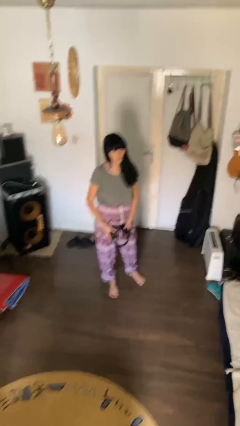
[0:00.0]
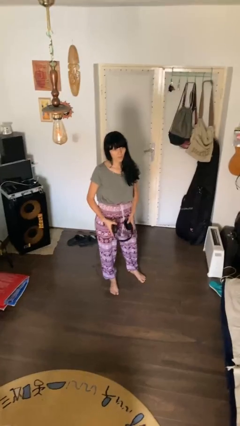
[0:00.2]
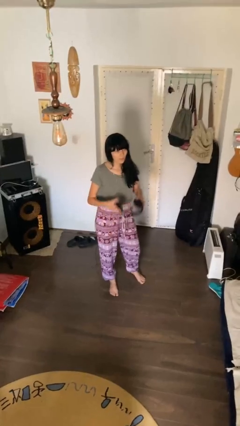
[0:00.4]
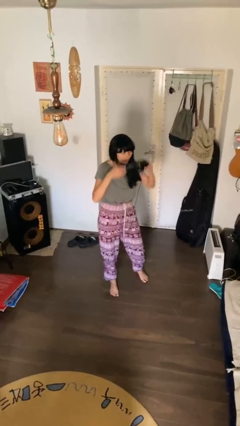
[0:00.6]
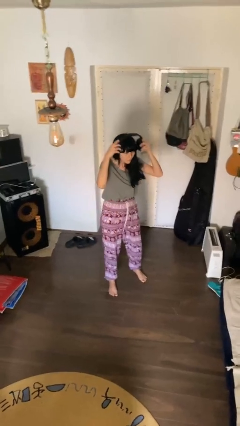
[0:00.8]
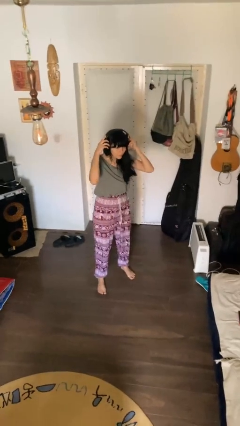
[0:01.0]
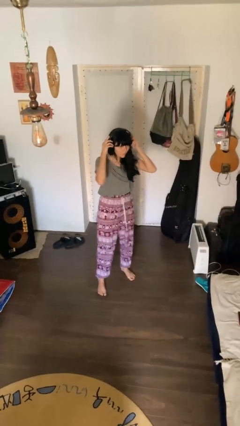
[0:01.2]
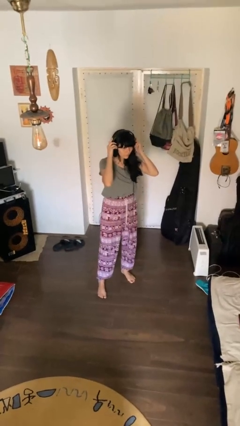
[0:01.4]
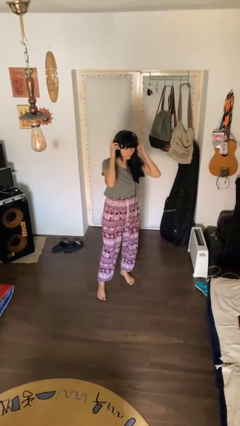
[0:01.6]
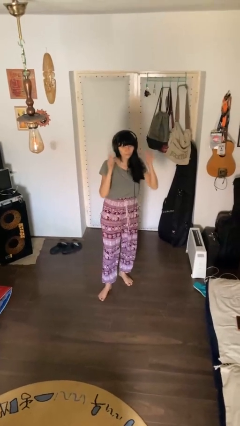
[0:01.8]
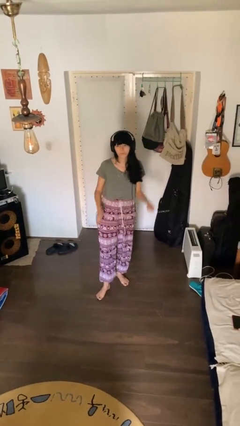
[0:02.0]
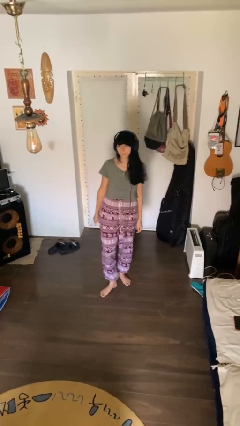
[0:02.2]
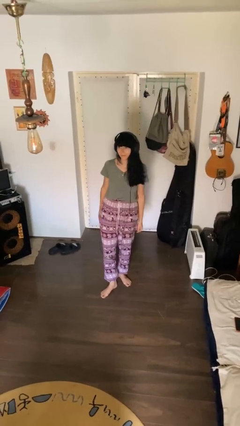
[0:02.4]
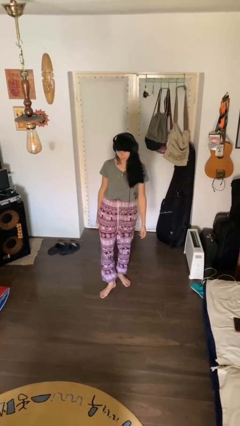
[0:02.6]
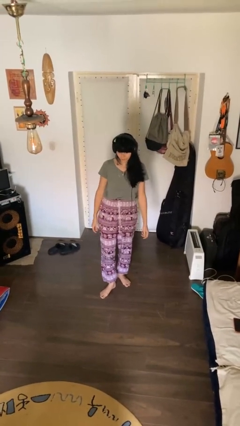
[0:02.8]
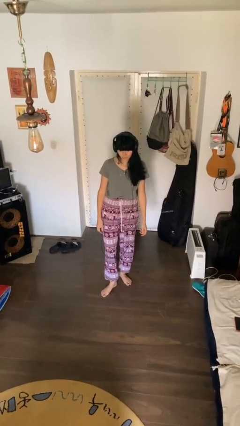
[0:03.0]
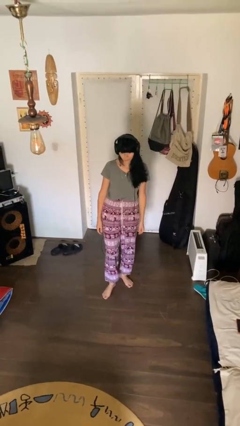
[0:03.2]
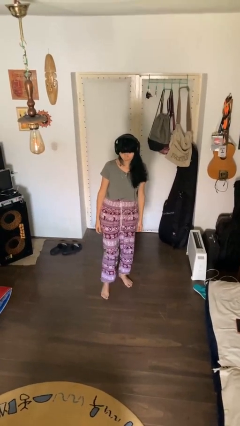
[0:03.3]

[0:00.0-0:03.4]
person puts on headphones

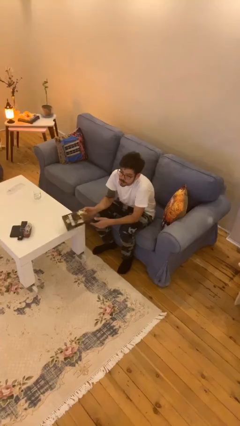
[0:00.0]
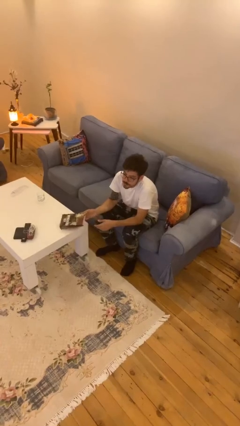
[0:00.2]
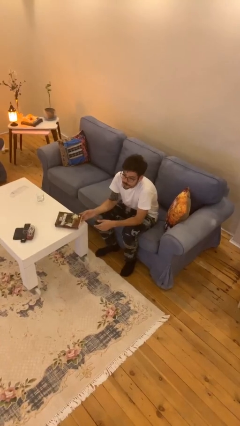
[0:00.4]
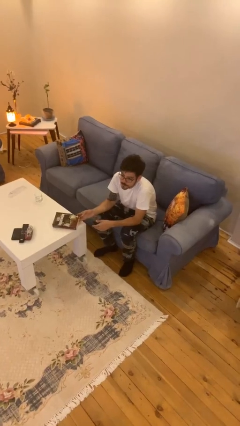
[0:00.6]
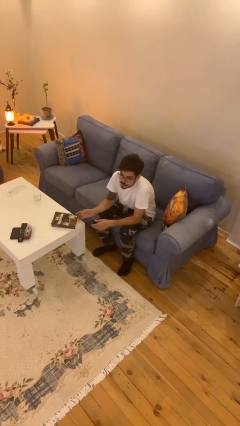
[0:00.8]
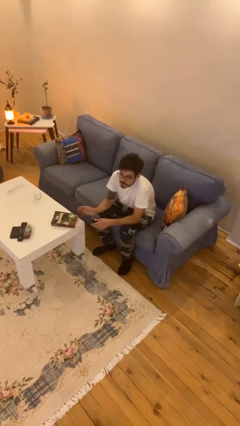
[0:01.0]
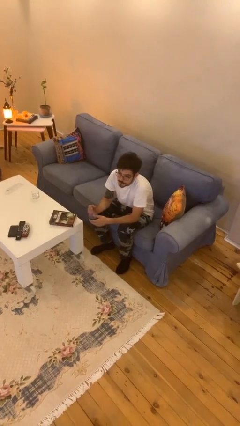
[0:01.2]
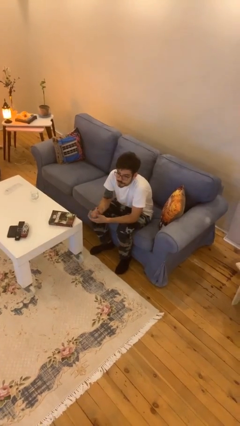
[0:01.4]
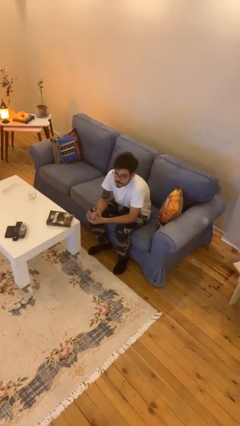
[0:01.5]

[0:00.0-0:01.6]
person puts down object on table

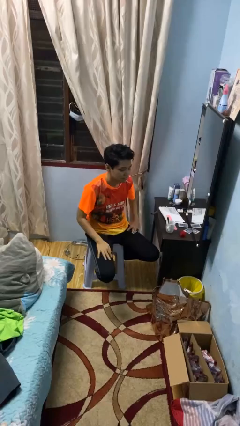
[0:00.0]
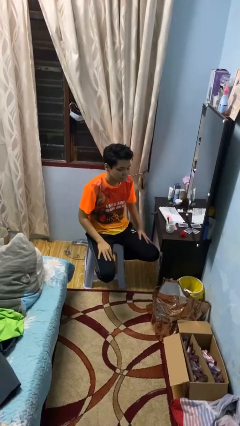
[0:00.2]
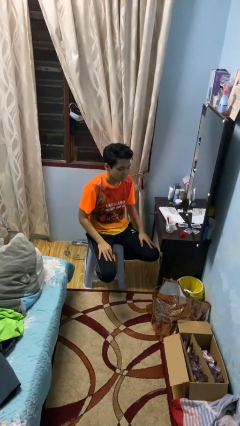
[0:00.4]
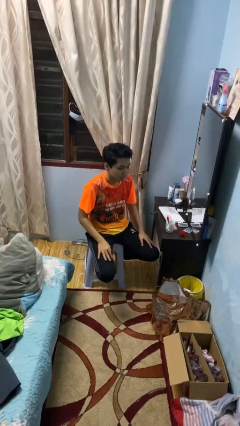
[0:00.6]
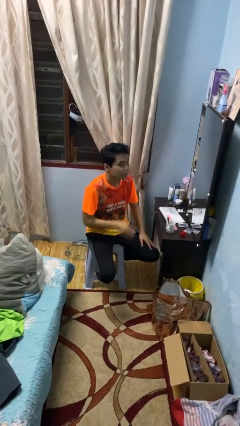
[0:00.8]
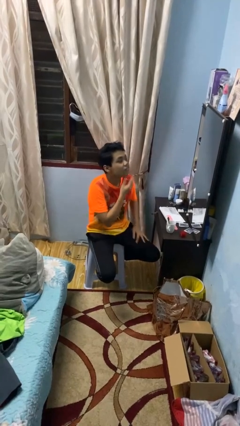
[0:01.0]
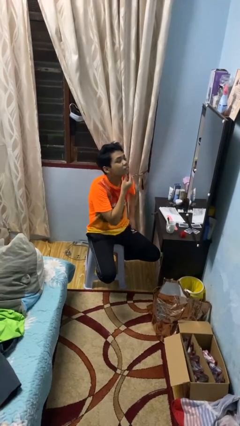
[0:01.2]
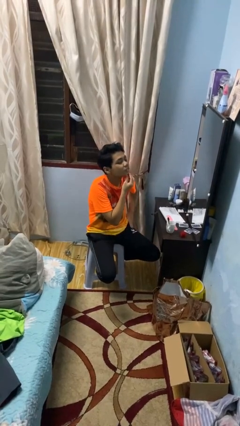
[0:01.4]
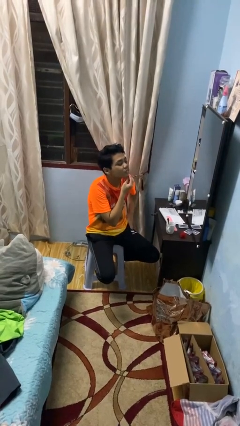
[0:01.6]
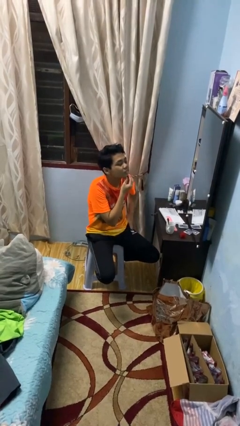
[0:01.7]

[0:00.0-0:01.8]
person strokes chin

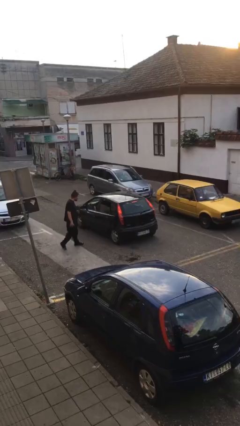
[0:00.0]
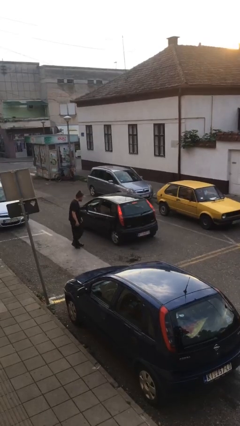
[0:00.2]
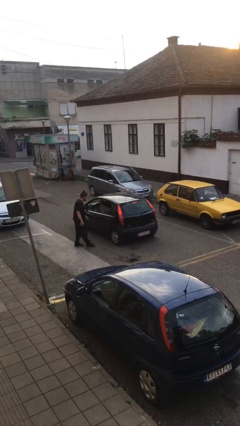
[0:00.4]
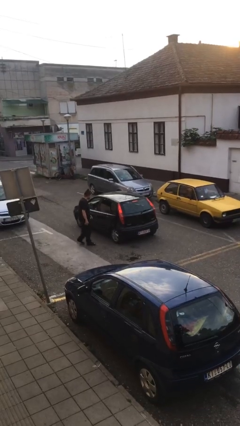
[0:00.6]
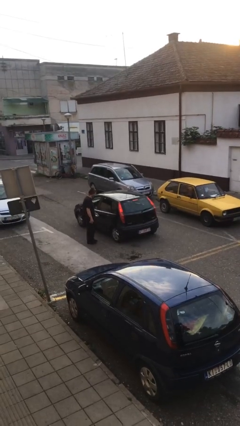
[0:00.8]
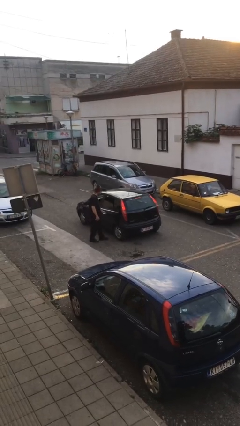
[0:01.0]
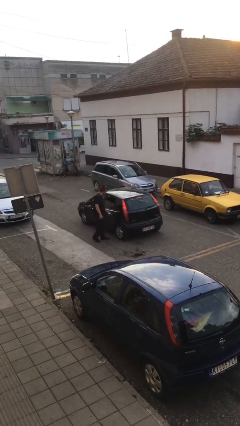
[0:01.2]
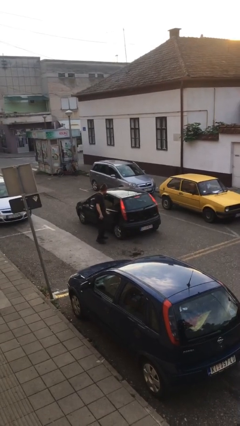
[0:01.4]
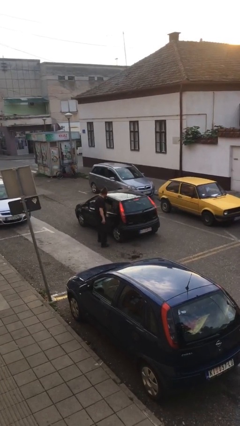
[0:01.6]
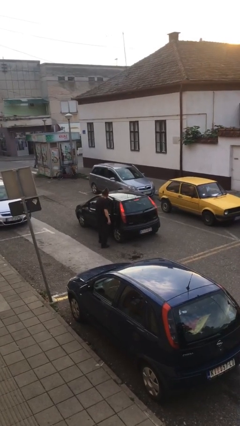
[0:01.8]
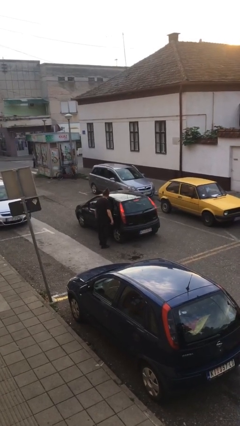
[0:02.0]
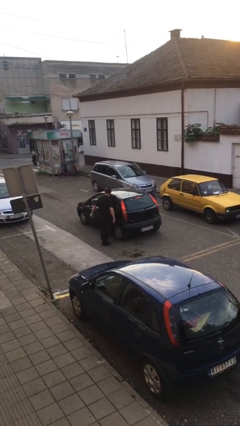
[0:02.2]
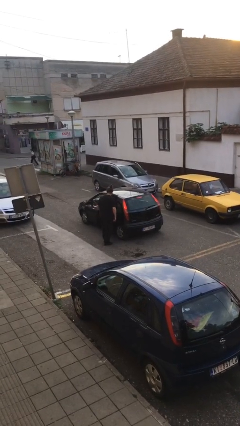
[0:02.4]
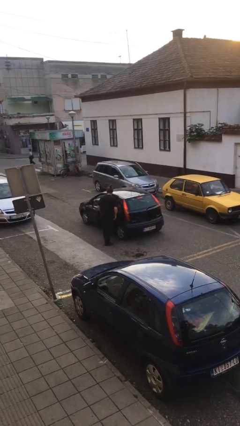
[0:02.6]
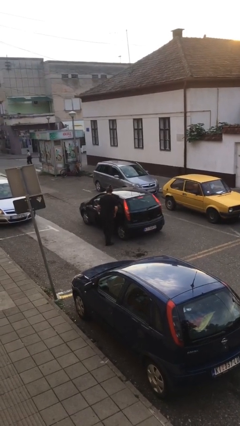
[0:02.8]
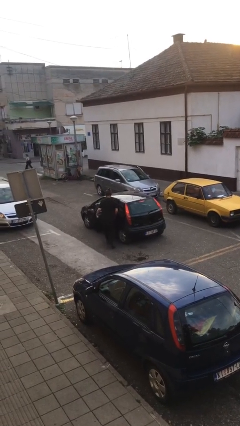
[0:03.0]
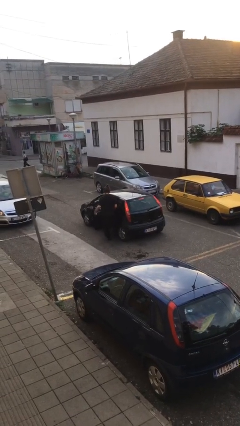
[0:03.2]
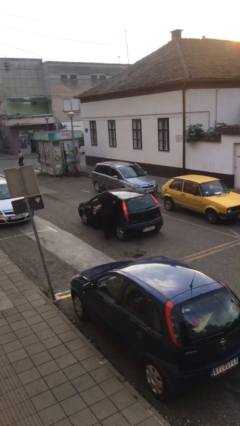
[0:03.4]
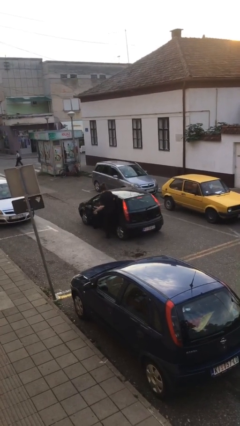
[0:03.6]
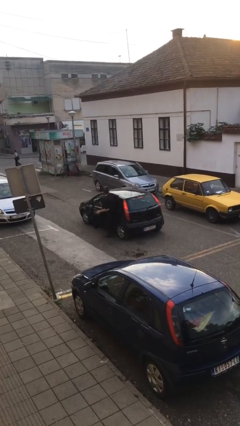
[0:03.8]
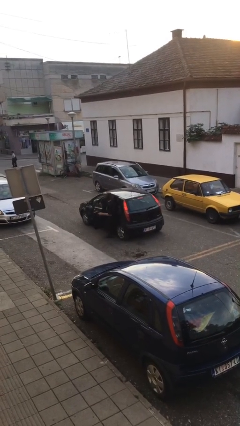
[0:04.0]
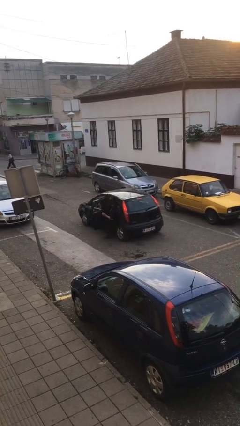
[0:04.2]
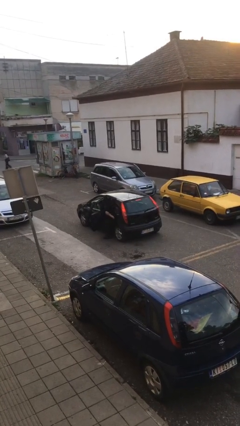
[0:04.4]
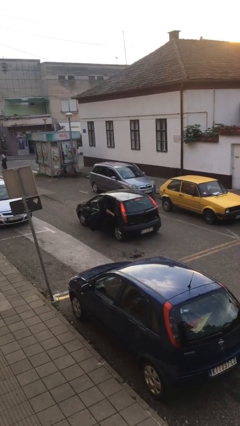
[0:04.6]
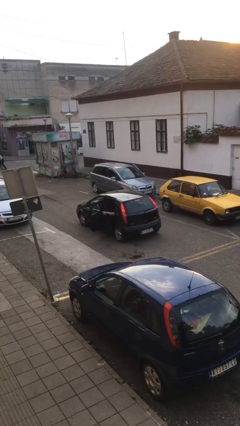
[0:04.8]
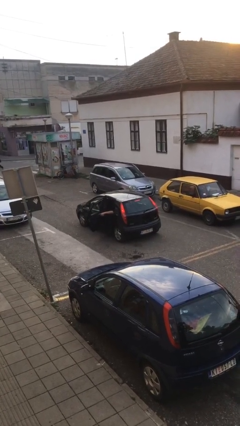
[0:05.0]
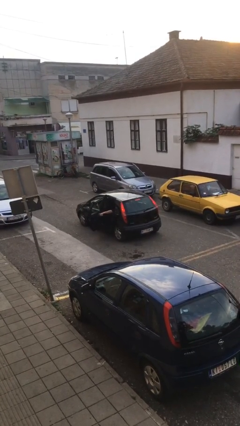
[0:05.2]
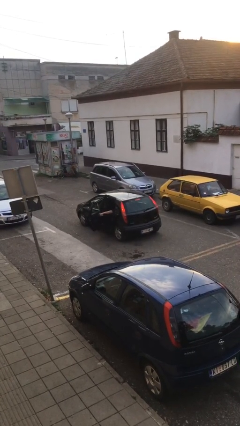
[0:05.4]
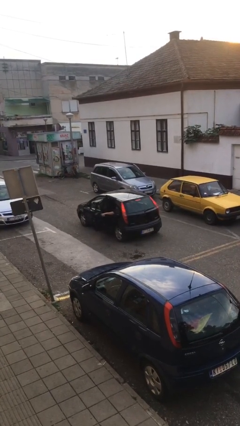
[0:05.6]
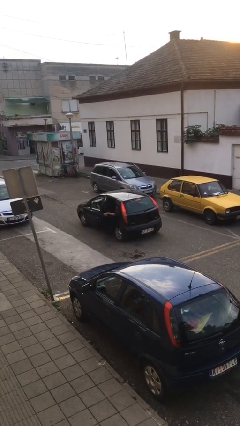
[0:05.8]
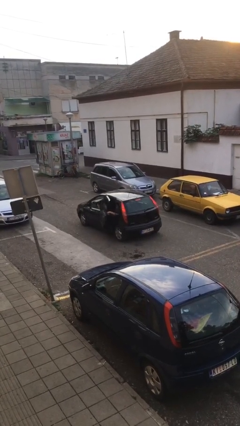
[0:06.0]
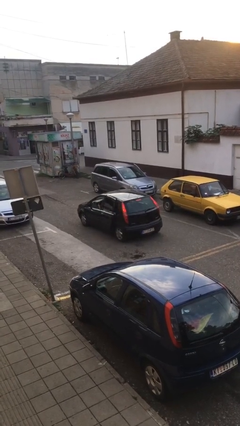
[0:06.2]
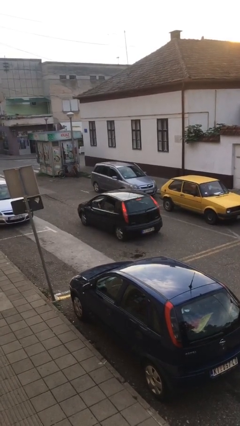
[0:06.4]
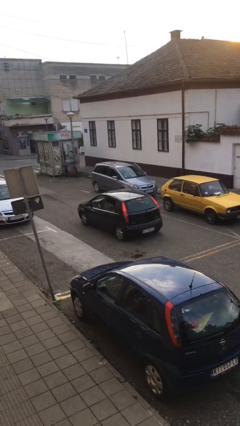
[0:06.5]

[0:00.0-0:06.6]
car picks up person

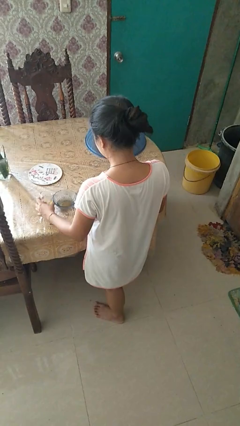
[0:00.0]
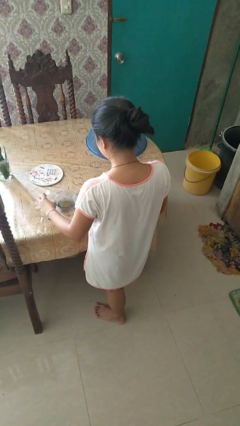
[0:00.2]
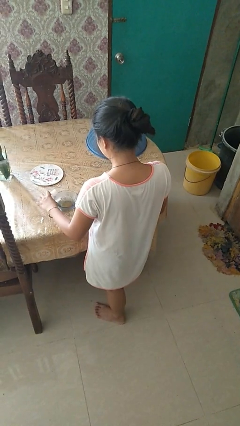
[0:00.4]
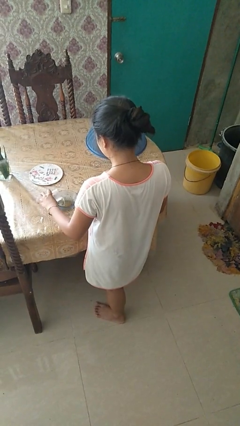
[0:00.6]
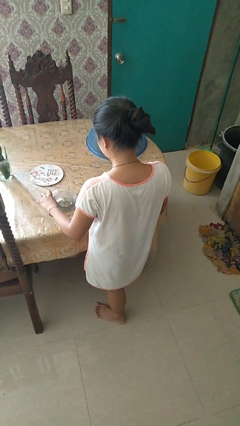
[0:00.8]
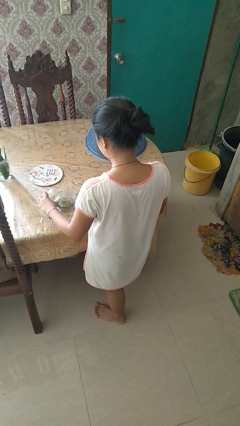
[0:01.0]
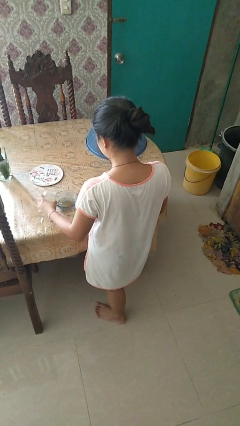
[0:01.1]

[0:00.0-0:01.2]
person pours into bowl

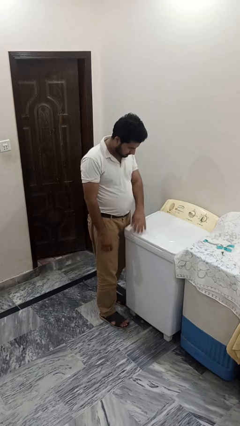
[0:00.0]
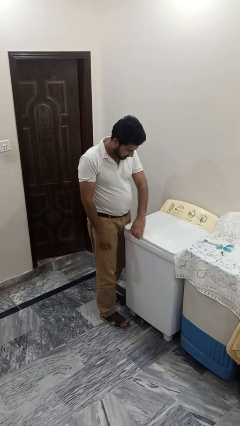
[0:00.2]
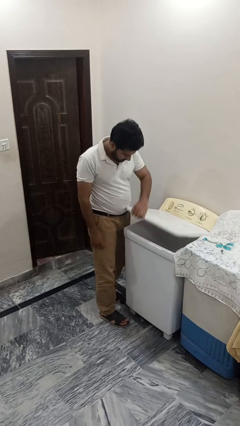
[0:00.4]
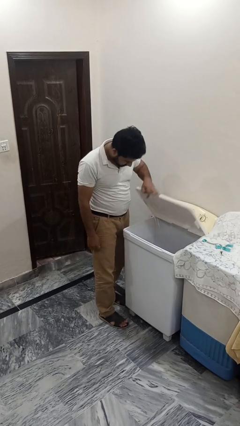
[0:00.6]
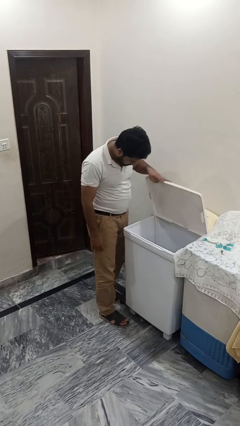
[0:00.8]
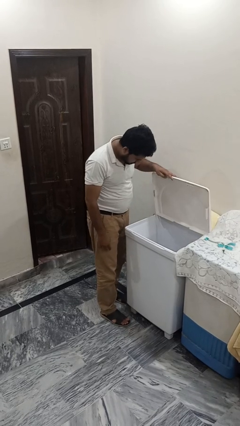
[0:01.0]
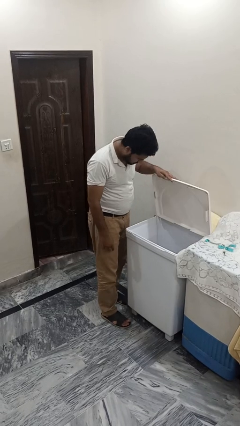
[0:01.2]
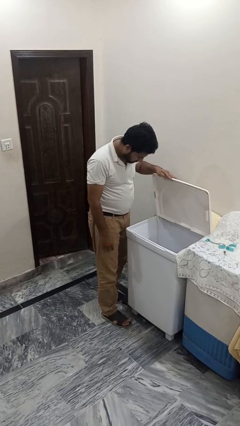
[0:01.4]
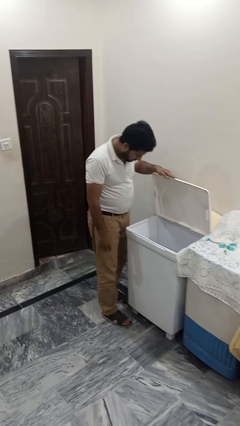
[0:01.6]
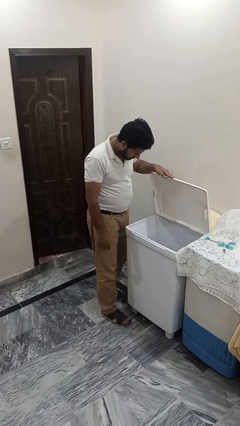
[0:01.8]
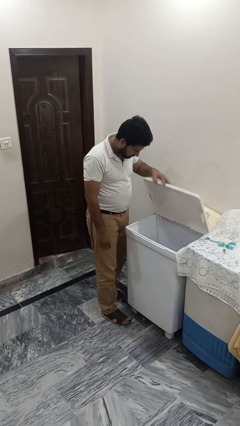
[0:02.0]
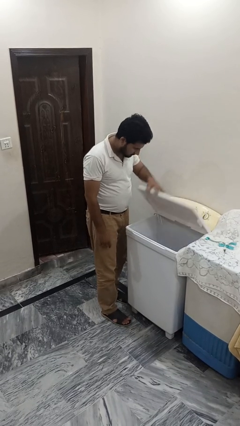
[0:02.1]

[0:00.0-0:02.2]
person opens clothes washer

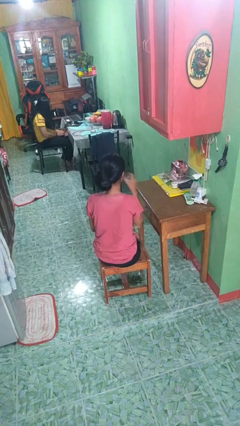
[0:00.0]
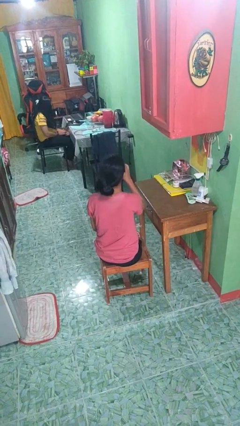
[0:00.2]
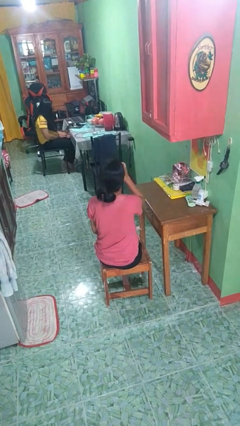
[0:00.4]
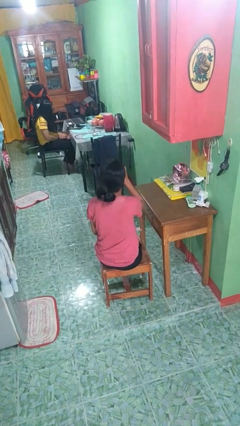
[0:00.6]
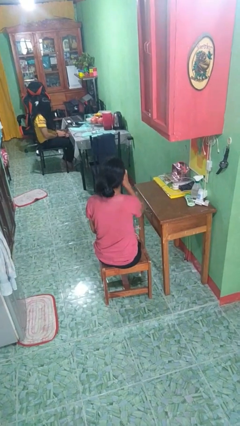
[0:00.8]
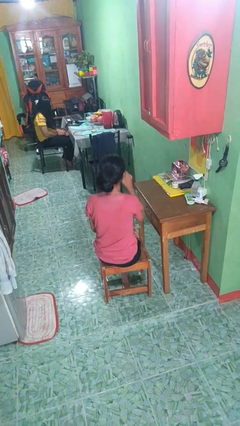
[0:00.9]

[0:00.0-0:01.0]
person drinks from shotglass
